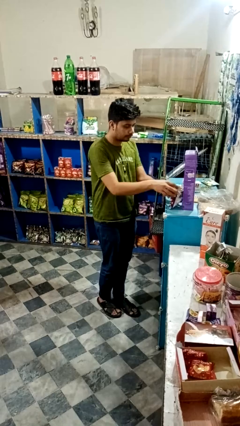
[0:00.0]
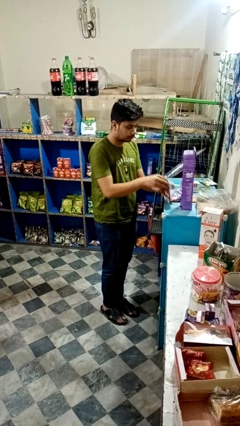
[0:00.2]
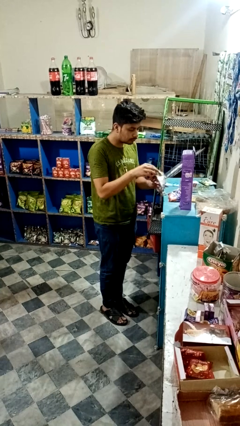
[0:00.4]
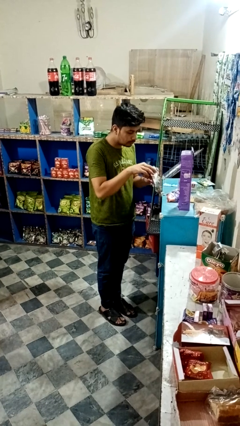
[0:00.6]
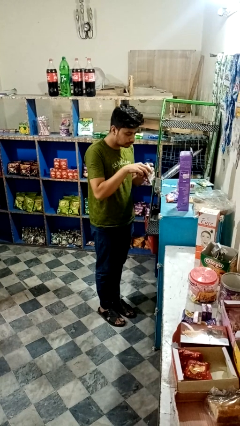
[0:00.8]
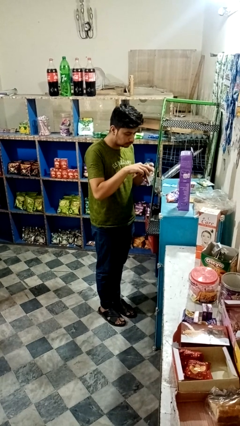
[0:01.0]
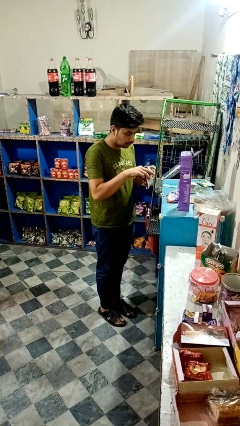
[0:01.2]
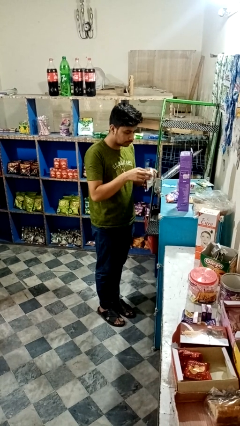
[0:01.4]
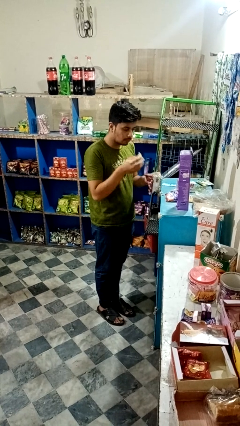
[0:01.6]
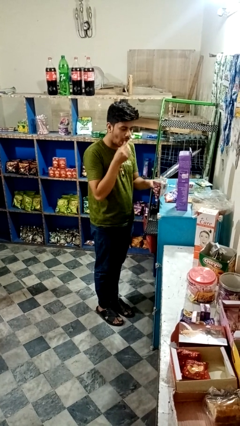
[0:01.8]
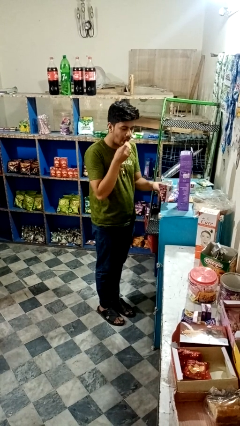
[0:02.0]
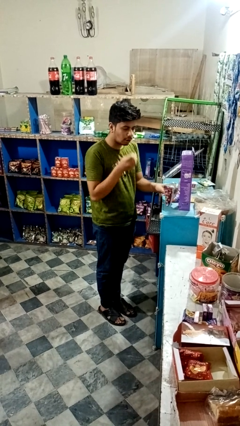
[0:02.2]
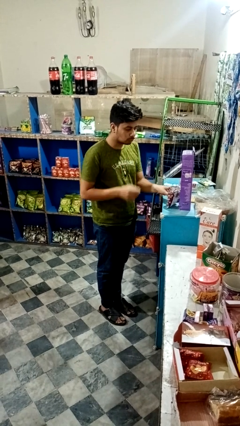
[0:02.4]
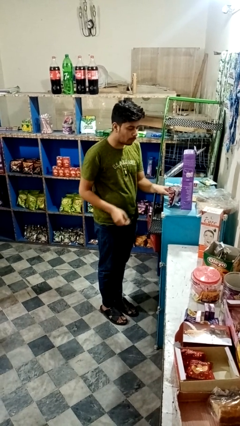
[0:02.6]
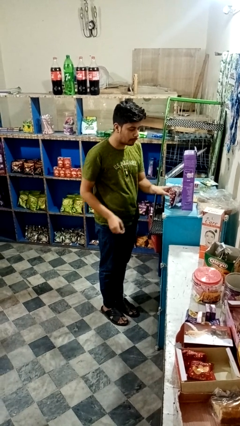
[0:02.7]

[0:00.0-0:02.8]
person eats snack from bag

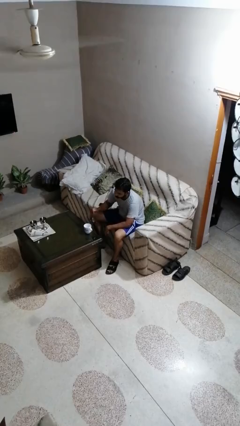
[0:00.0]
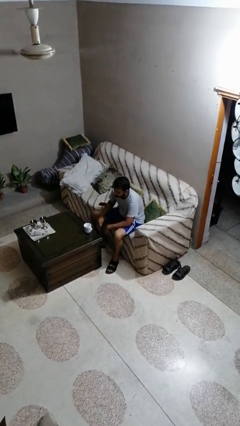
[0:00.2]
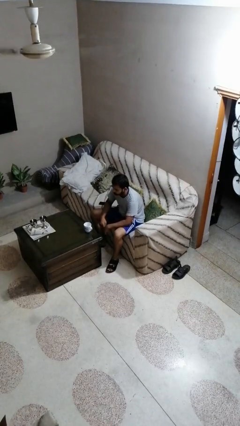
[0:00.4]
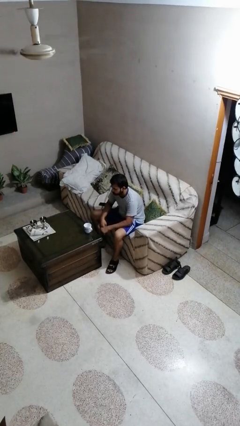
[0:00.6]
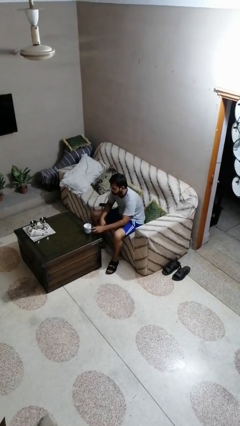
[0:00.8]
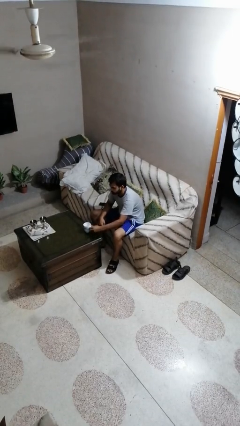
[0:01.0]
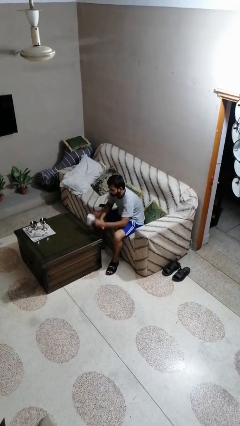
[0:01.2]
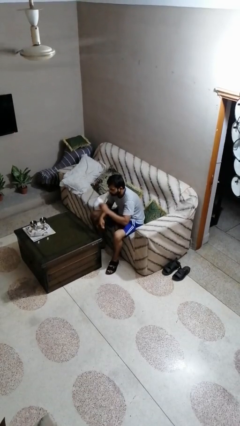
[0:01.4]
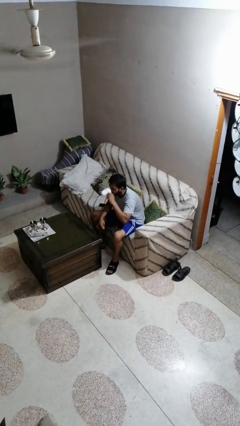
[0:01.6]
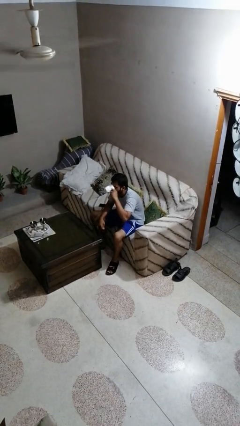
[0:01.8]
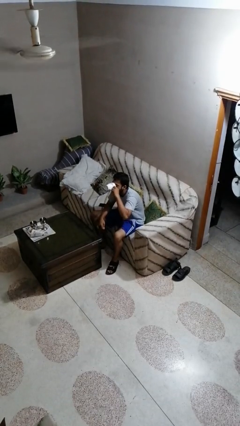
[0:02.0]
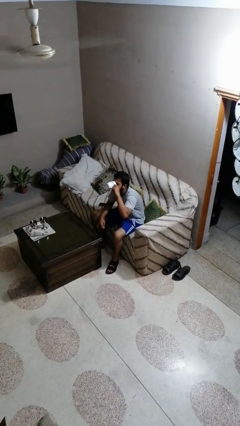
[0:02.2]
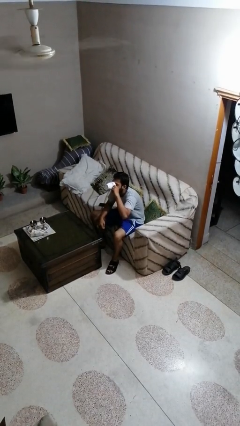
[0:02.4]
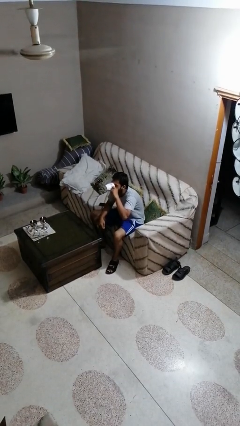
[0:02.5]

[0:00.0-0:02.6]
person drinks from mug

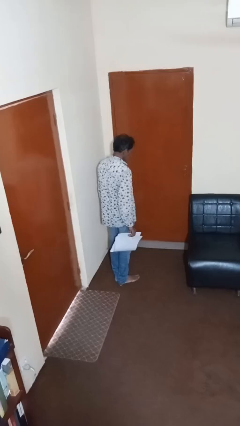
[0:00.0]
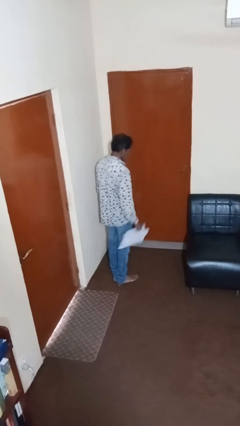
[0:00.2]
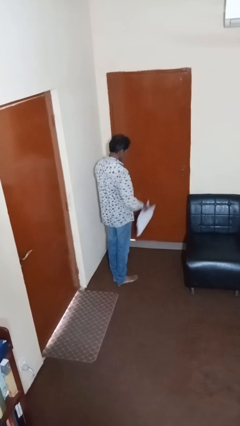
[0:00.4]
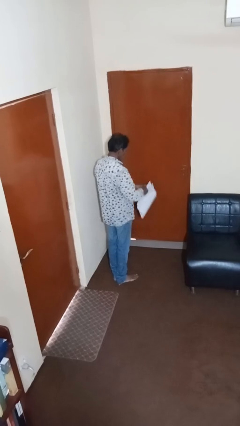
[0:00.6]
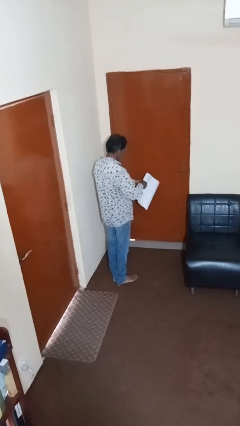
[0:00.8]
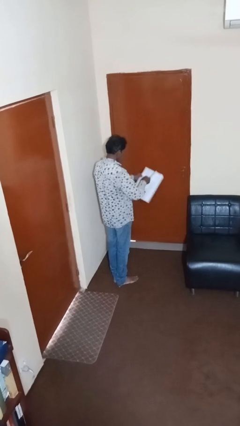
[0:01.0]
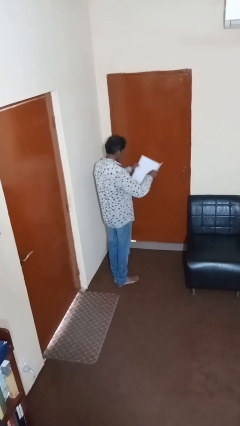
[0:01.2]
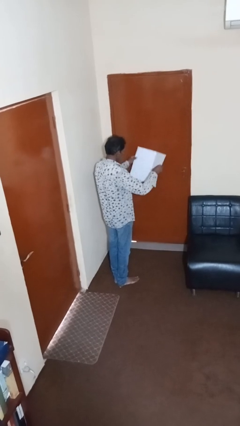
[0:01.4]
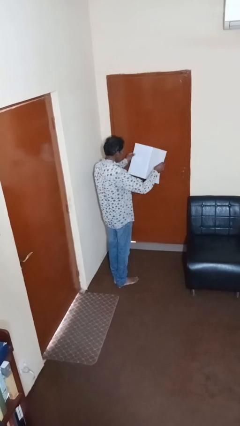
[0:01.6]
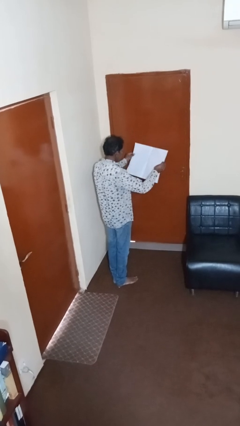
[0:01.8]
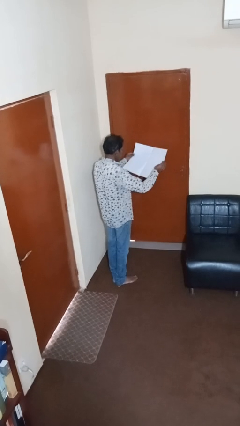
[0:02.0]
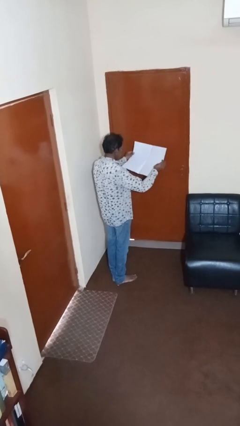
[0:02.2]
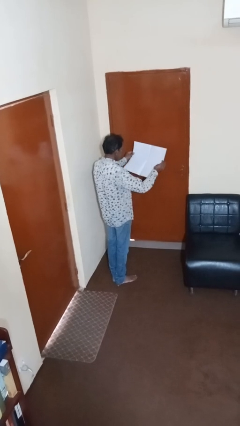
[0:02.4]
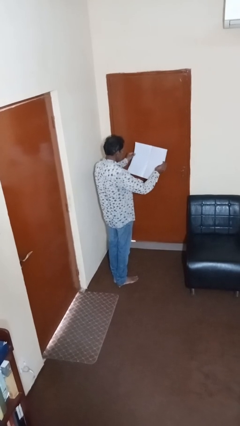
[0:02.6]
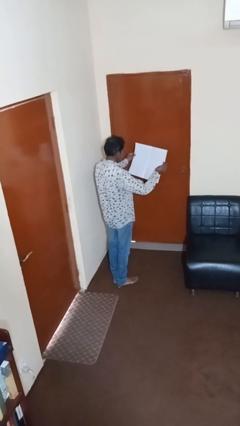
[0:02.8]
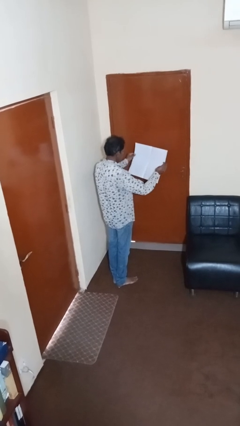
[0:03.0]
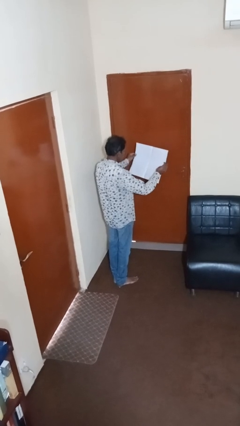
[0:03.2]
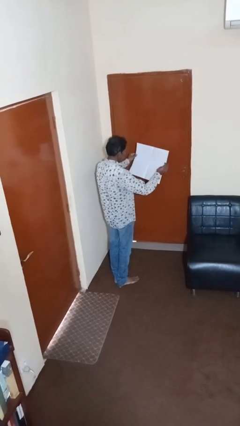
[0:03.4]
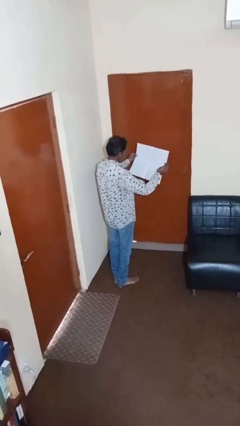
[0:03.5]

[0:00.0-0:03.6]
person reads newspaper

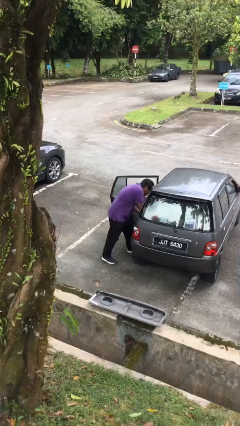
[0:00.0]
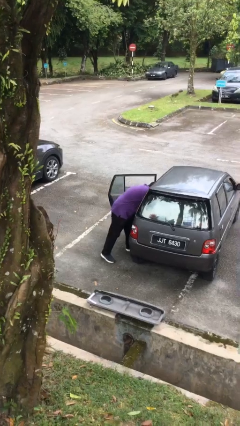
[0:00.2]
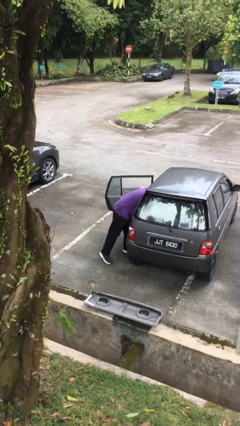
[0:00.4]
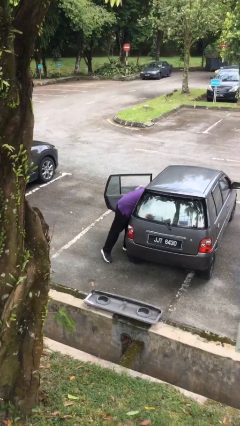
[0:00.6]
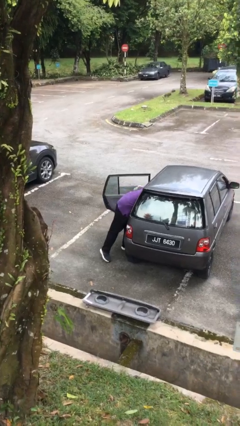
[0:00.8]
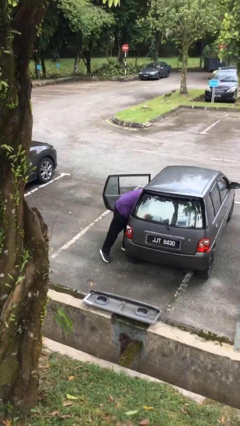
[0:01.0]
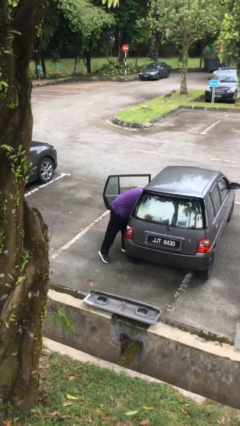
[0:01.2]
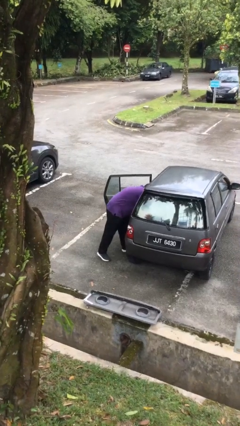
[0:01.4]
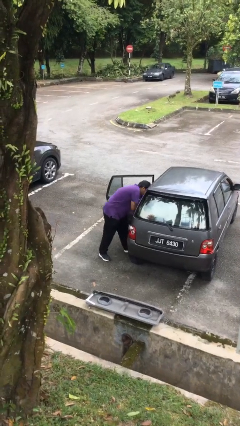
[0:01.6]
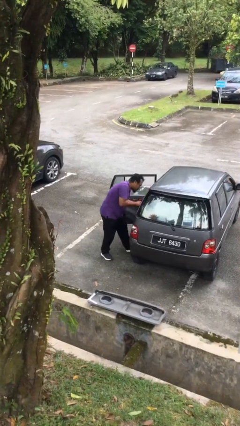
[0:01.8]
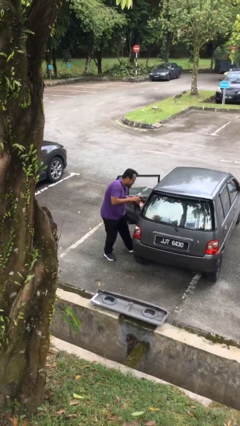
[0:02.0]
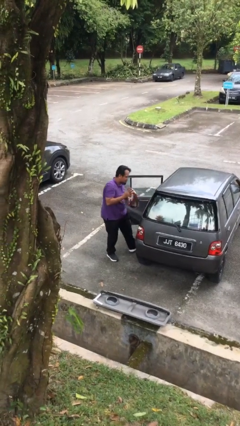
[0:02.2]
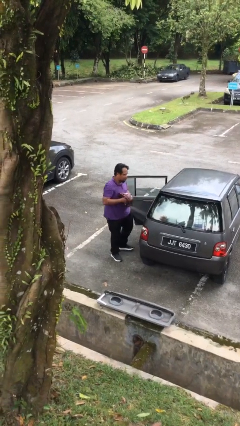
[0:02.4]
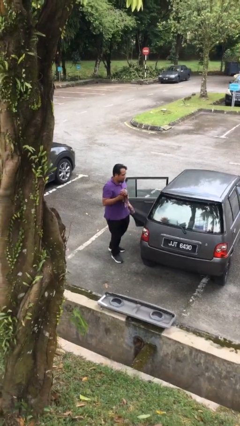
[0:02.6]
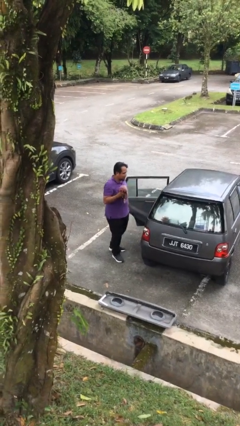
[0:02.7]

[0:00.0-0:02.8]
person unloads car

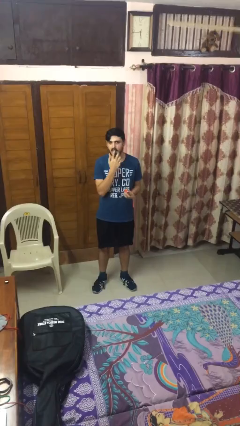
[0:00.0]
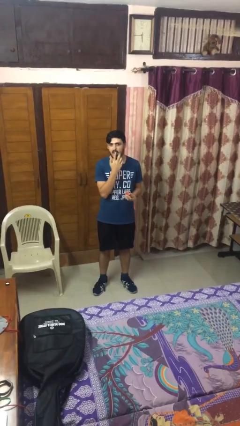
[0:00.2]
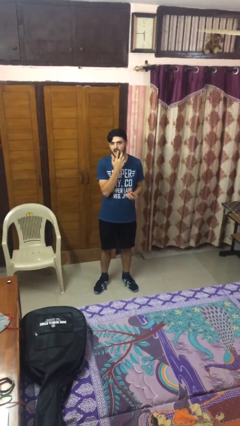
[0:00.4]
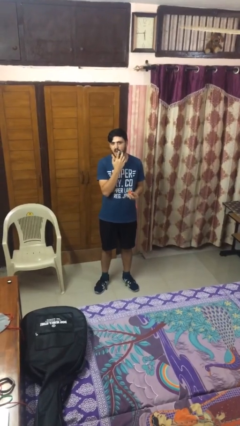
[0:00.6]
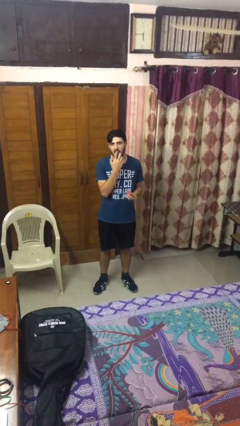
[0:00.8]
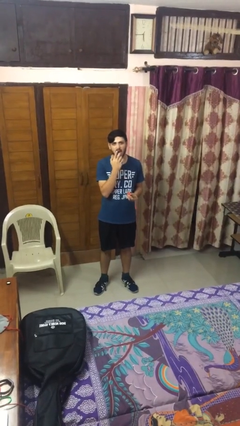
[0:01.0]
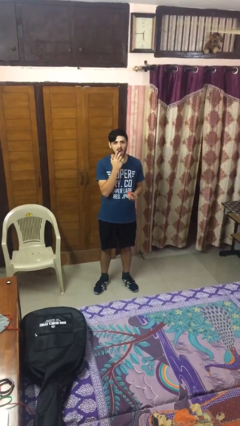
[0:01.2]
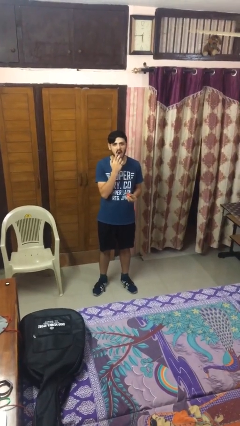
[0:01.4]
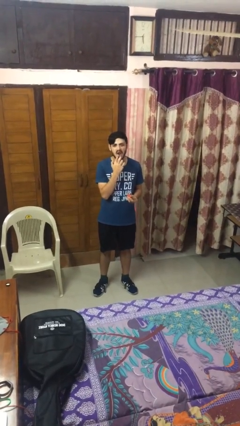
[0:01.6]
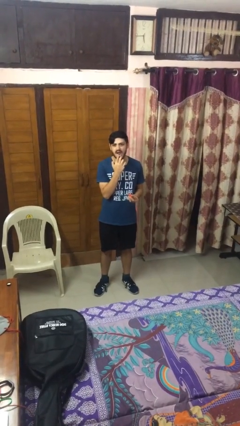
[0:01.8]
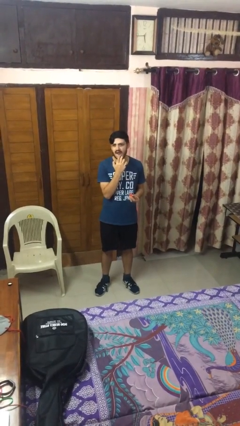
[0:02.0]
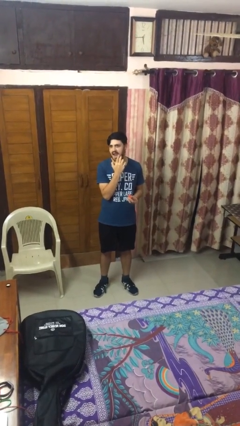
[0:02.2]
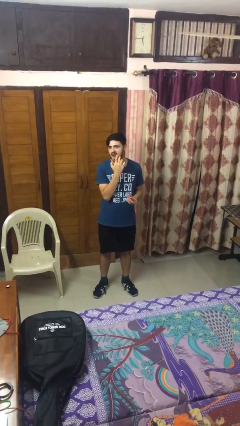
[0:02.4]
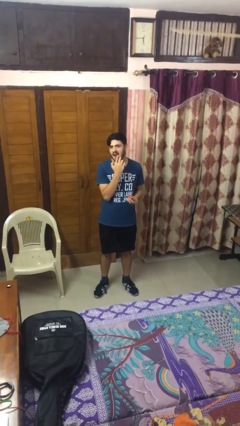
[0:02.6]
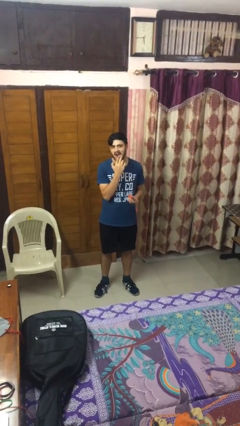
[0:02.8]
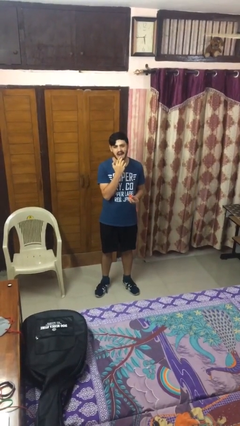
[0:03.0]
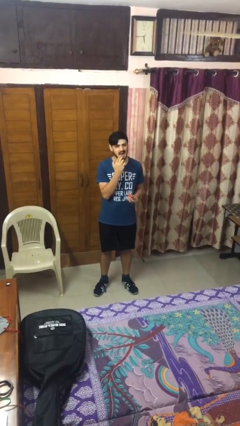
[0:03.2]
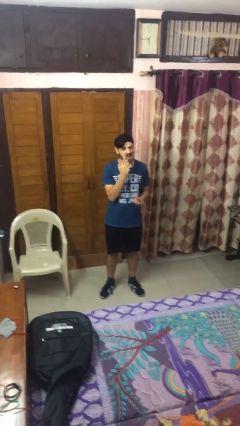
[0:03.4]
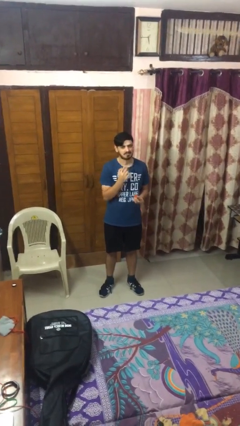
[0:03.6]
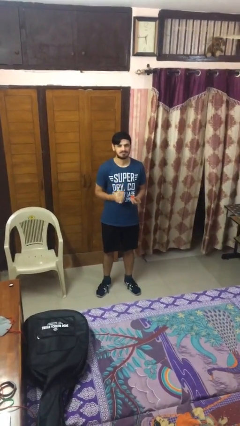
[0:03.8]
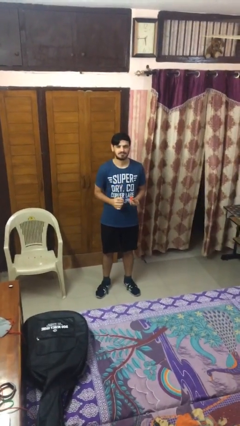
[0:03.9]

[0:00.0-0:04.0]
person applies lip makeup

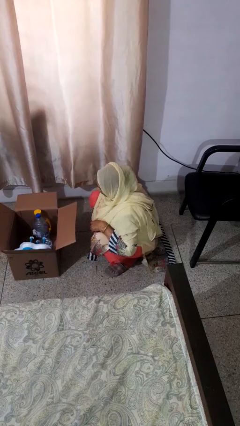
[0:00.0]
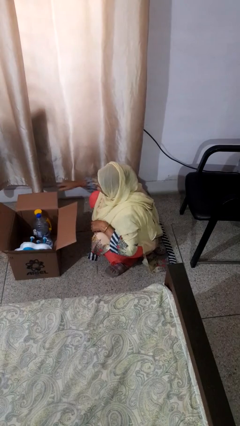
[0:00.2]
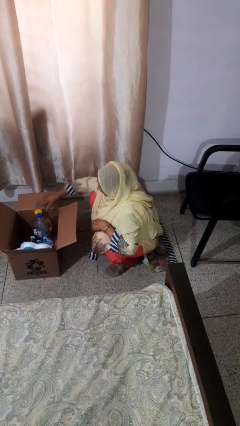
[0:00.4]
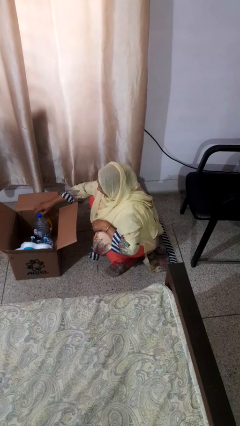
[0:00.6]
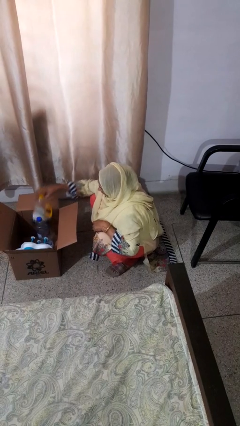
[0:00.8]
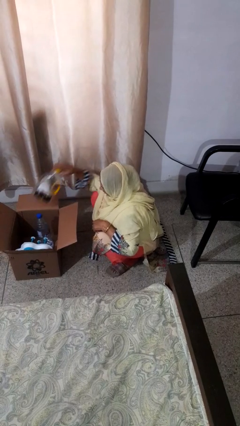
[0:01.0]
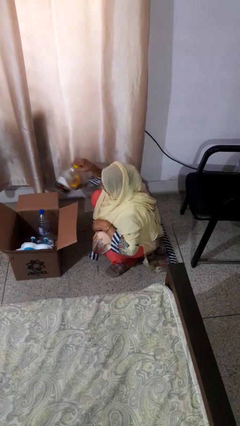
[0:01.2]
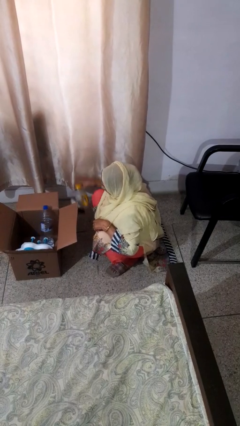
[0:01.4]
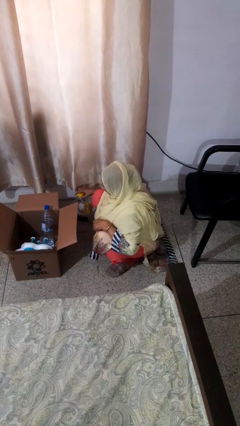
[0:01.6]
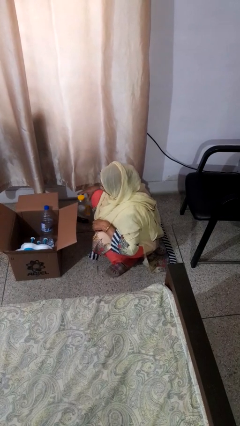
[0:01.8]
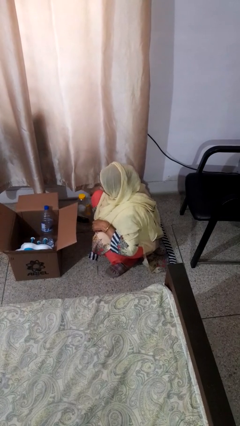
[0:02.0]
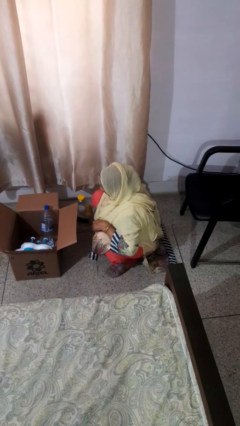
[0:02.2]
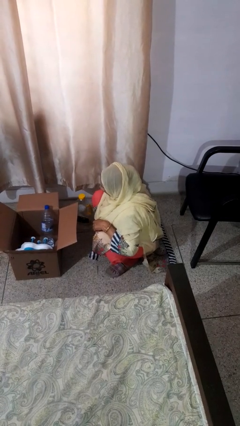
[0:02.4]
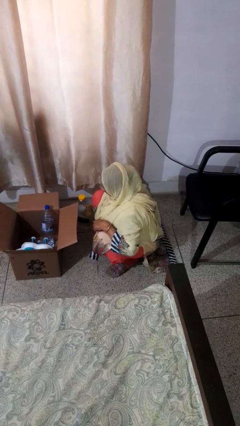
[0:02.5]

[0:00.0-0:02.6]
person takes object from box
